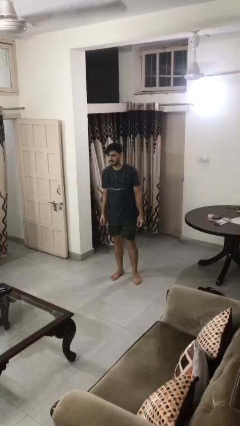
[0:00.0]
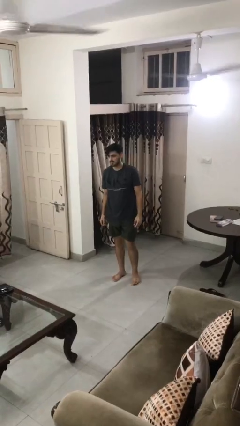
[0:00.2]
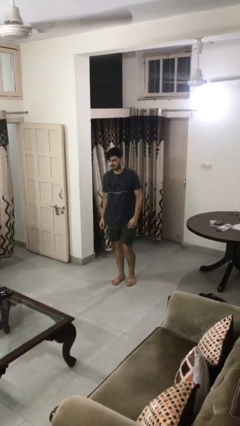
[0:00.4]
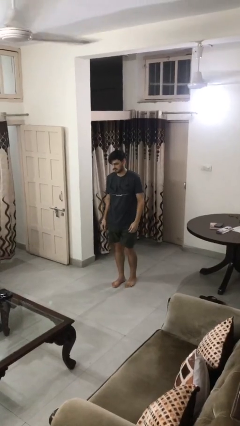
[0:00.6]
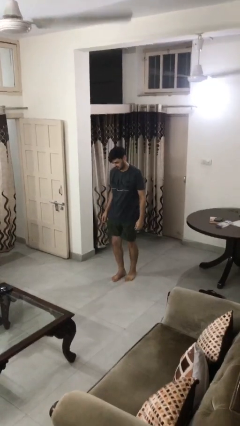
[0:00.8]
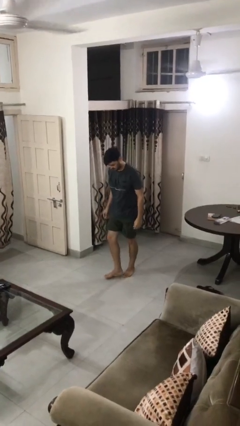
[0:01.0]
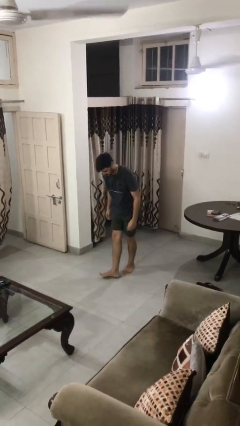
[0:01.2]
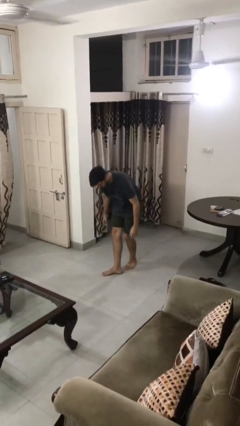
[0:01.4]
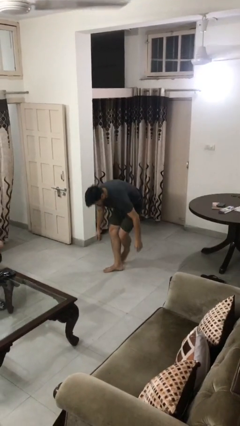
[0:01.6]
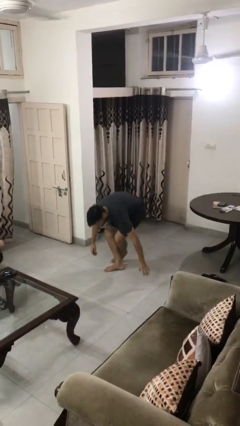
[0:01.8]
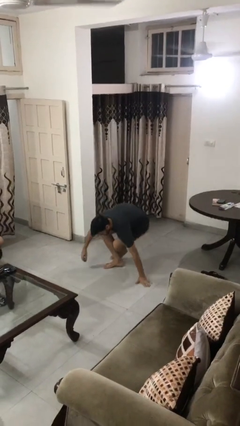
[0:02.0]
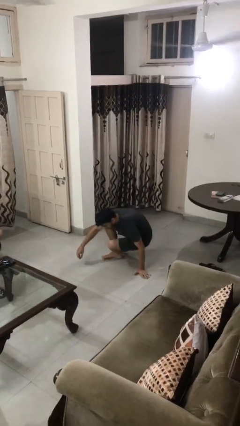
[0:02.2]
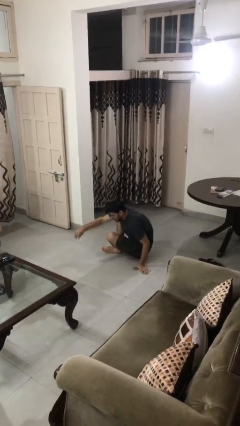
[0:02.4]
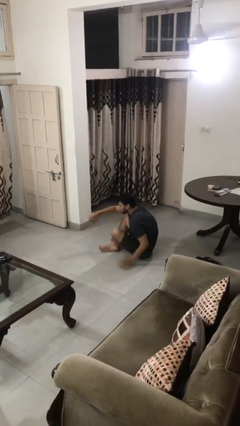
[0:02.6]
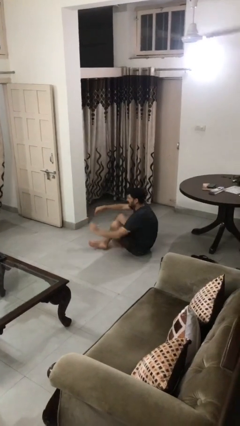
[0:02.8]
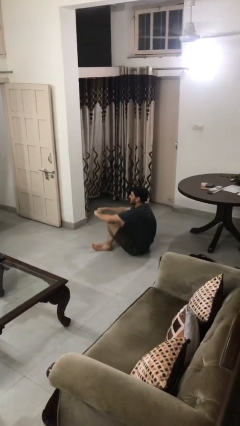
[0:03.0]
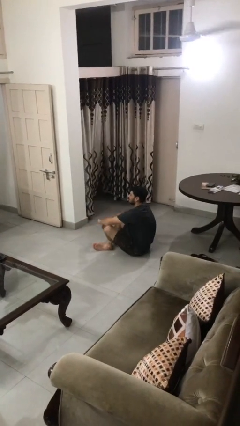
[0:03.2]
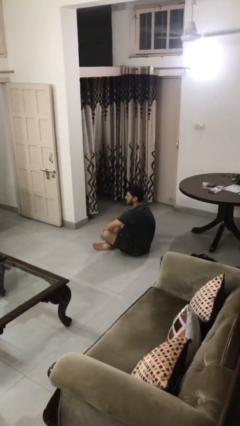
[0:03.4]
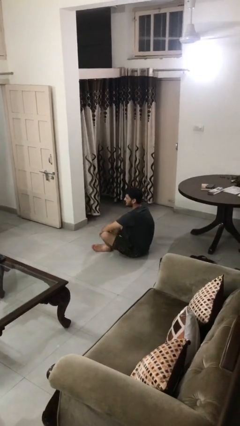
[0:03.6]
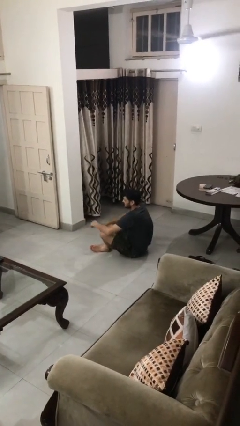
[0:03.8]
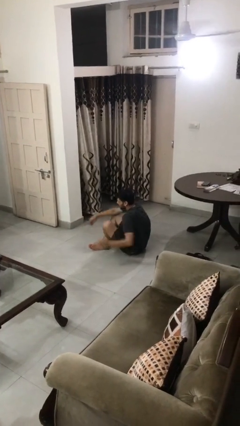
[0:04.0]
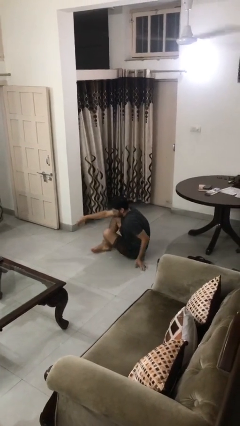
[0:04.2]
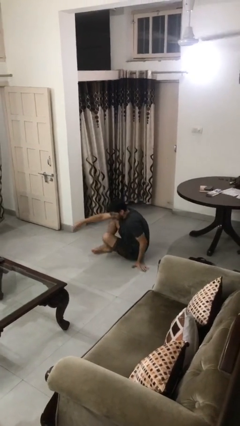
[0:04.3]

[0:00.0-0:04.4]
person sits crisscross

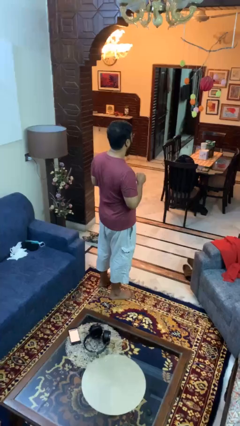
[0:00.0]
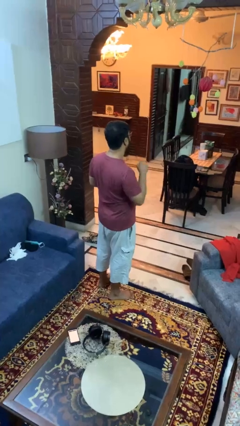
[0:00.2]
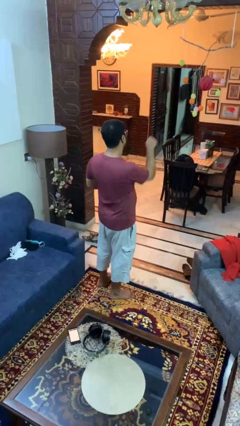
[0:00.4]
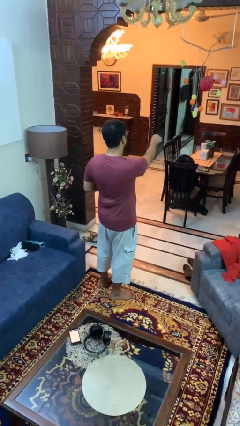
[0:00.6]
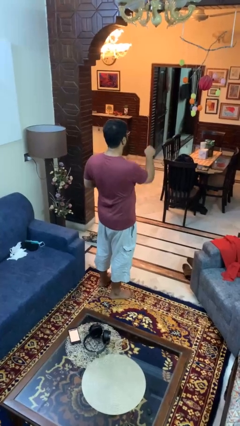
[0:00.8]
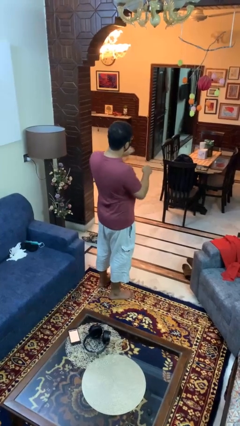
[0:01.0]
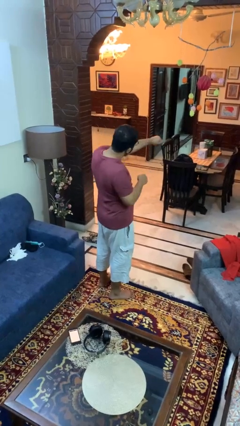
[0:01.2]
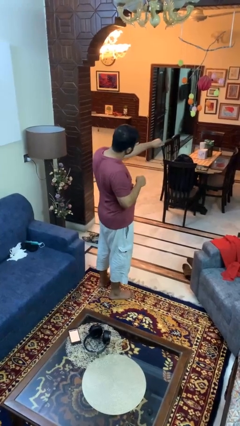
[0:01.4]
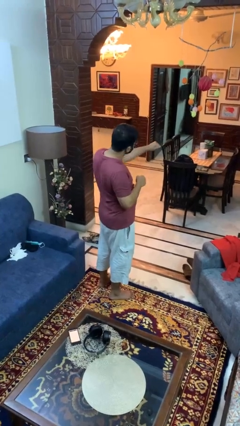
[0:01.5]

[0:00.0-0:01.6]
person punches

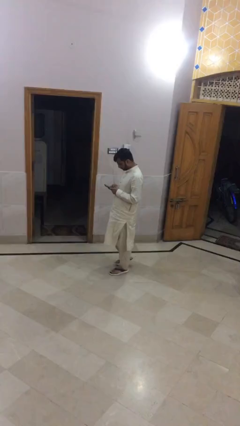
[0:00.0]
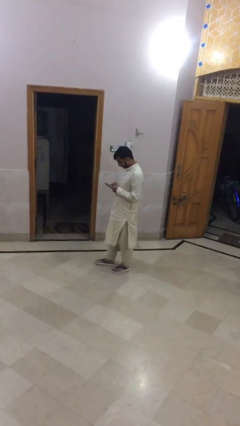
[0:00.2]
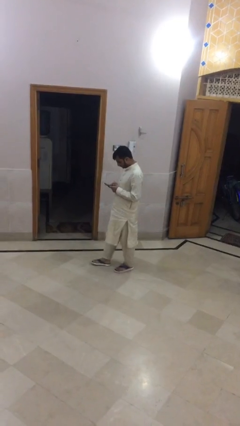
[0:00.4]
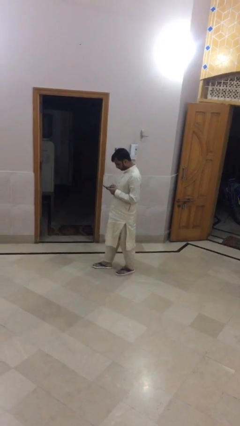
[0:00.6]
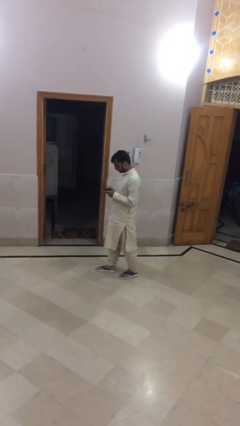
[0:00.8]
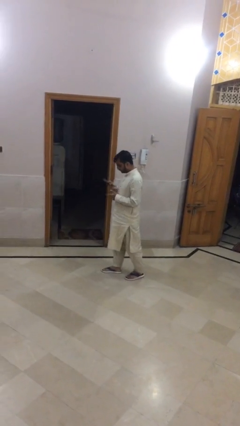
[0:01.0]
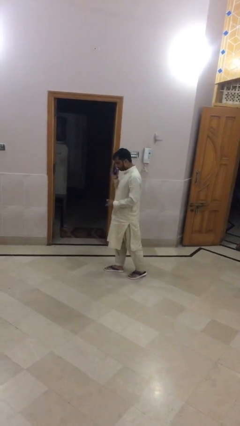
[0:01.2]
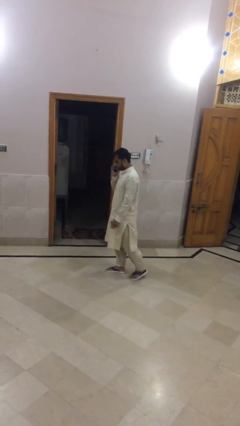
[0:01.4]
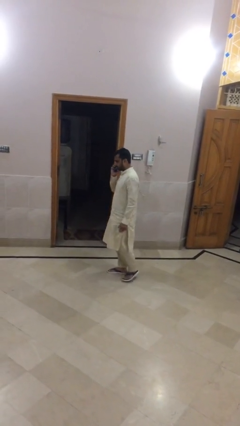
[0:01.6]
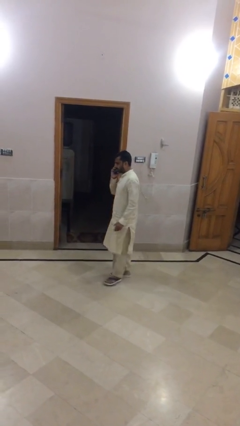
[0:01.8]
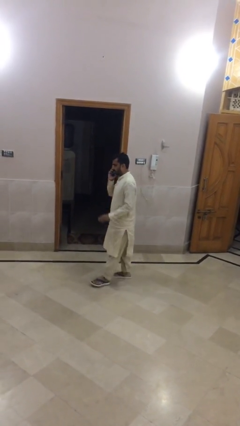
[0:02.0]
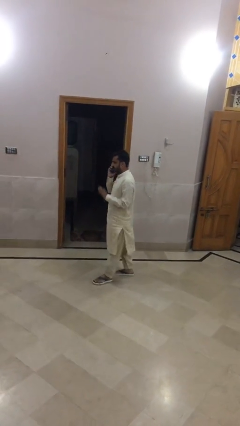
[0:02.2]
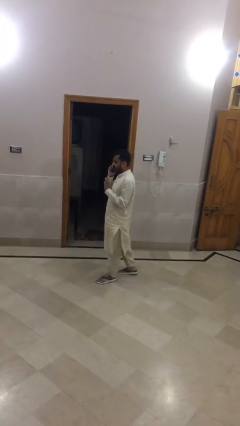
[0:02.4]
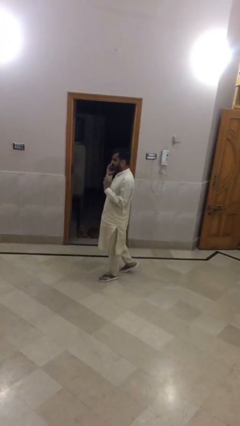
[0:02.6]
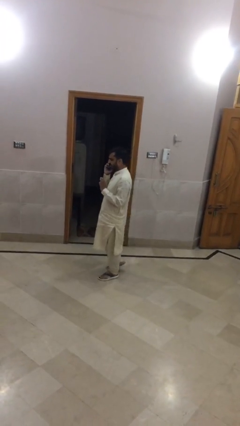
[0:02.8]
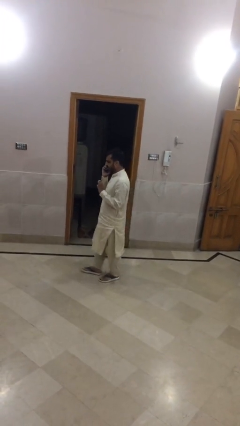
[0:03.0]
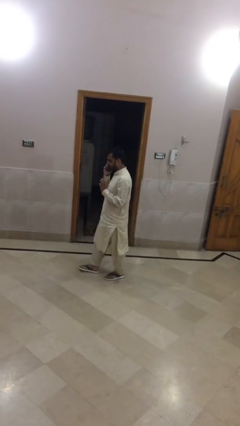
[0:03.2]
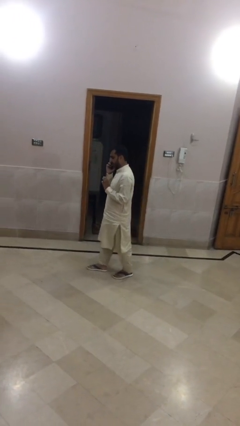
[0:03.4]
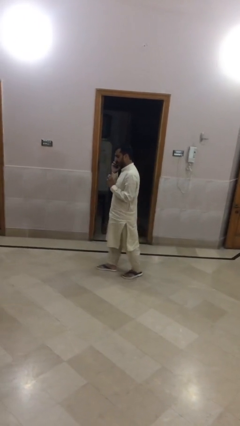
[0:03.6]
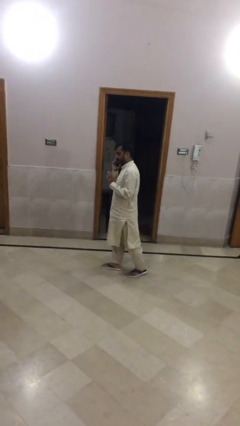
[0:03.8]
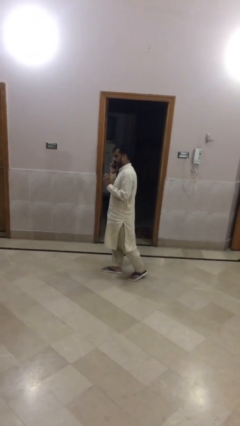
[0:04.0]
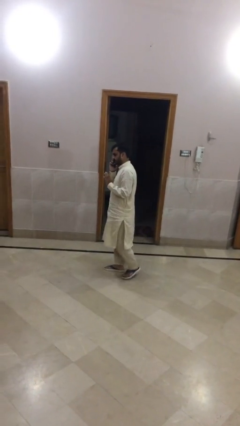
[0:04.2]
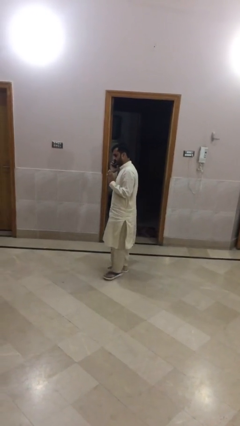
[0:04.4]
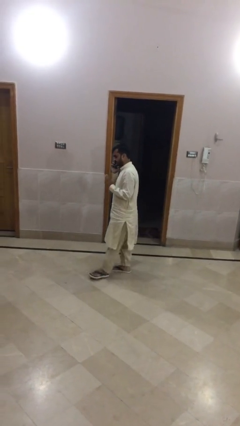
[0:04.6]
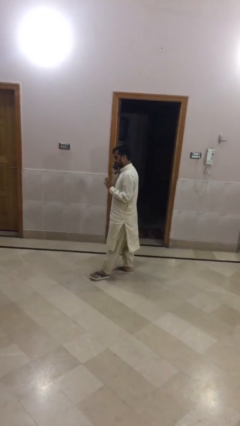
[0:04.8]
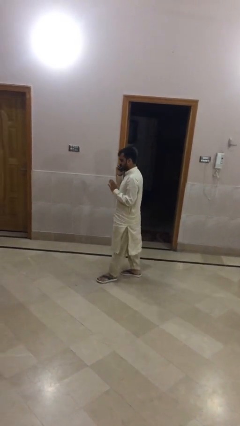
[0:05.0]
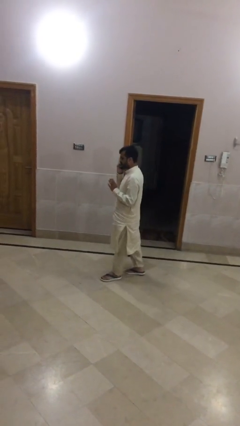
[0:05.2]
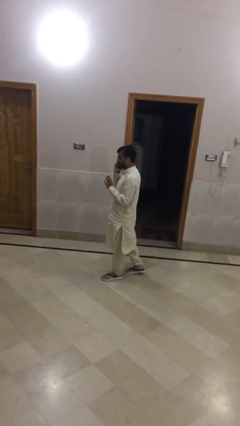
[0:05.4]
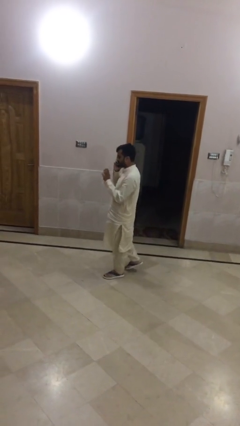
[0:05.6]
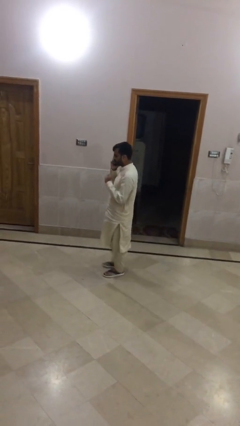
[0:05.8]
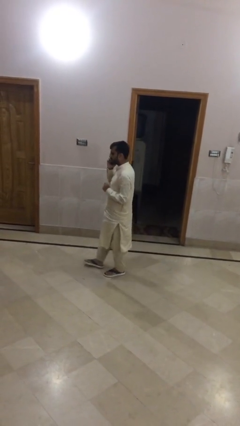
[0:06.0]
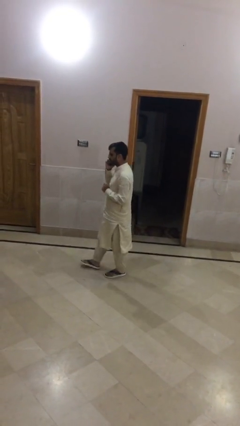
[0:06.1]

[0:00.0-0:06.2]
person talks on phone

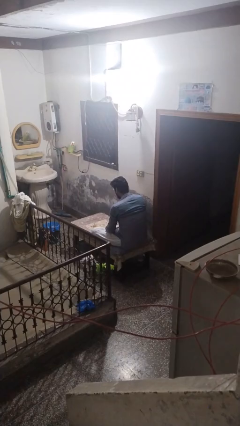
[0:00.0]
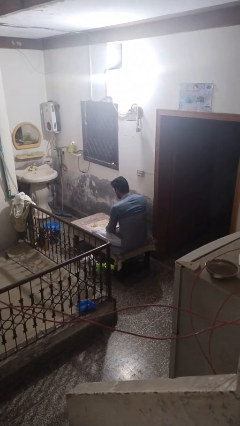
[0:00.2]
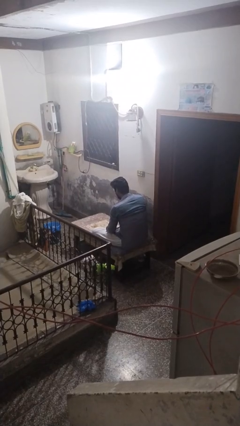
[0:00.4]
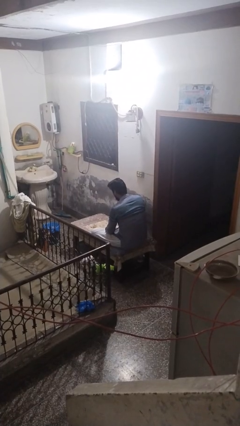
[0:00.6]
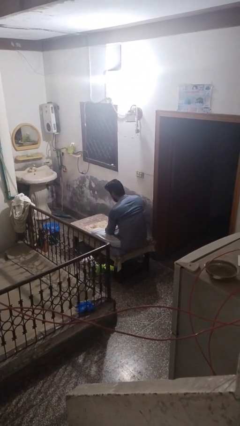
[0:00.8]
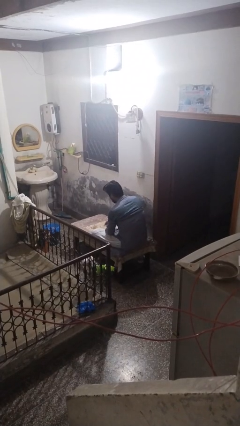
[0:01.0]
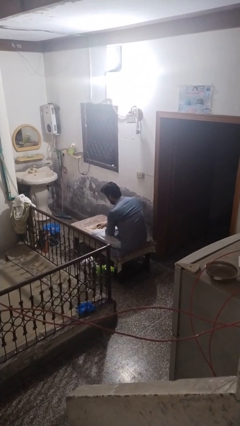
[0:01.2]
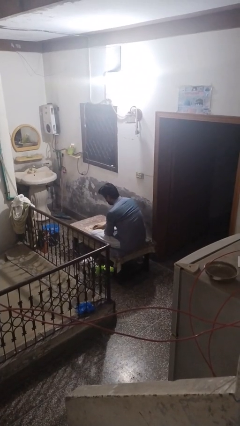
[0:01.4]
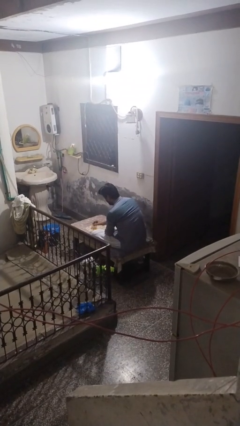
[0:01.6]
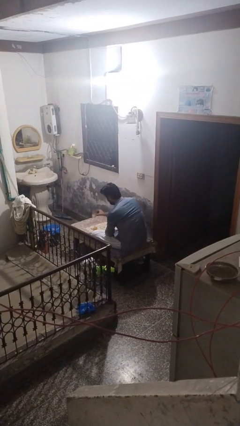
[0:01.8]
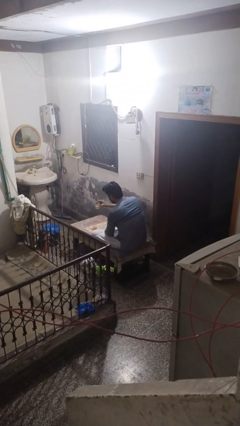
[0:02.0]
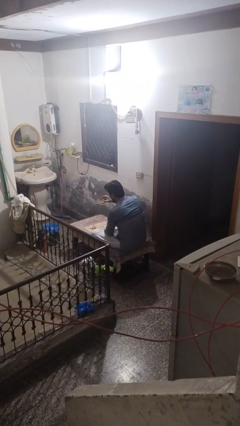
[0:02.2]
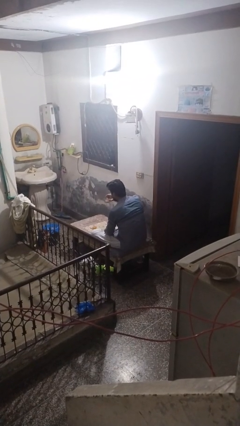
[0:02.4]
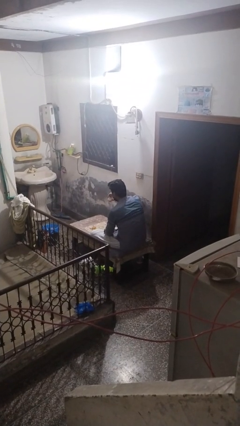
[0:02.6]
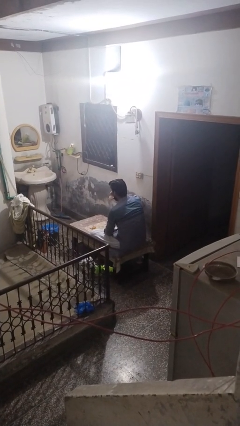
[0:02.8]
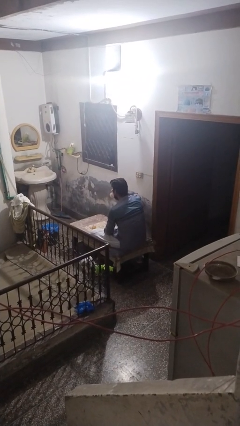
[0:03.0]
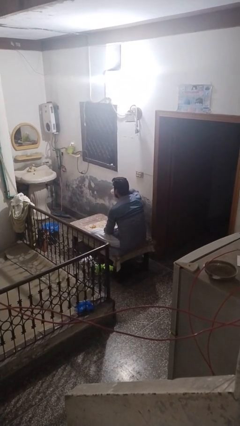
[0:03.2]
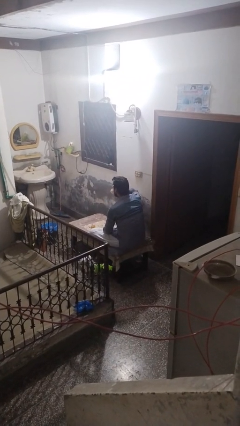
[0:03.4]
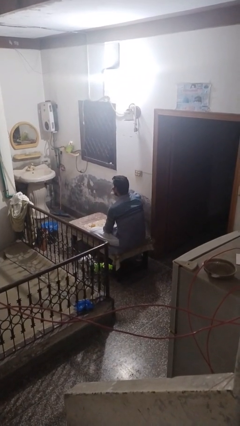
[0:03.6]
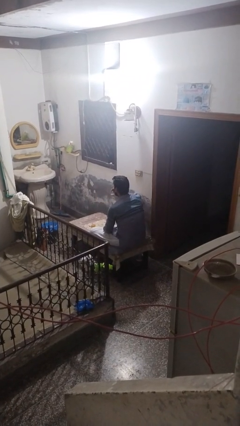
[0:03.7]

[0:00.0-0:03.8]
person picks up object from table

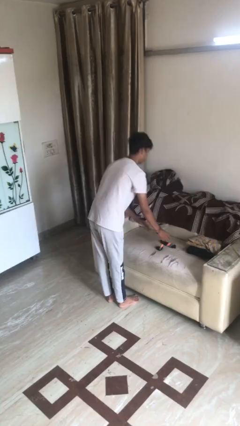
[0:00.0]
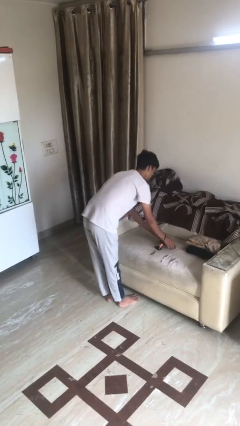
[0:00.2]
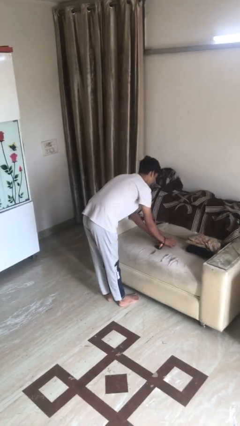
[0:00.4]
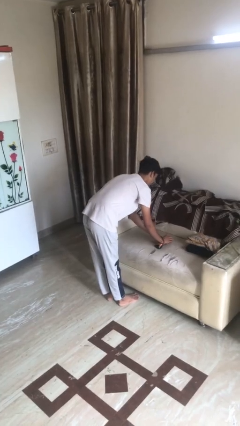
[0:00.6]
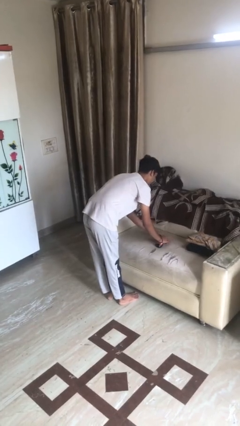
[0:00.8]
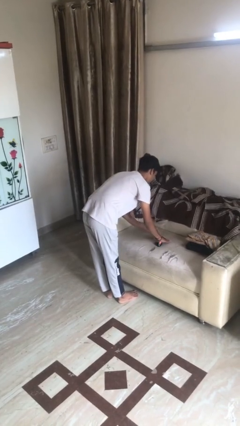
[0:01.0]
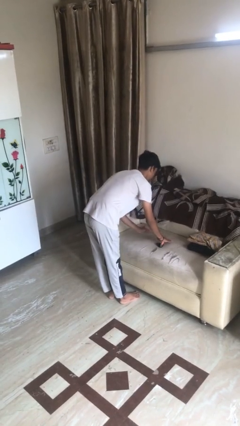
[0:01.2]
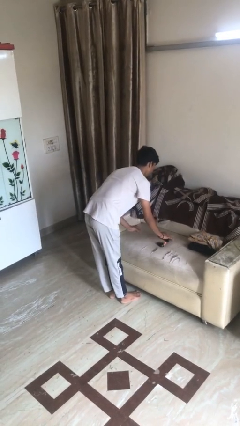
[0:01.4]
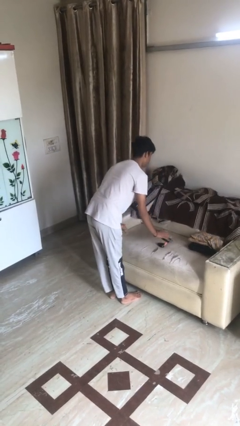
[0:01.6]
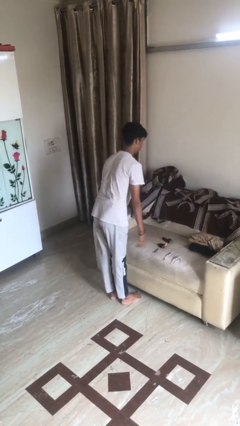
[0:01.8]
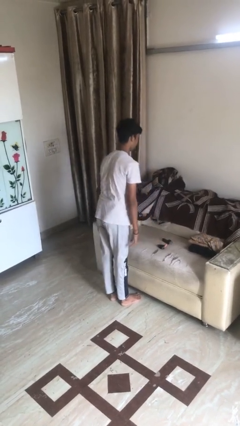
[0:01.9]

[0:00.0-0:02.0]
person folds socks
